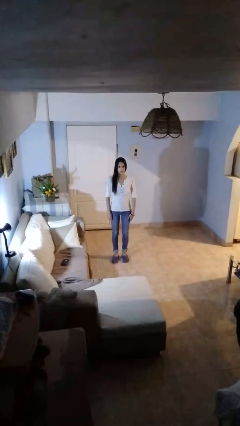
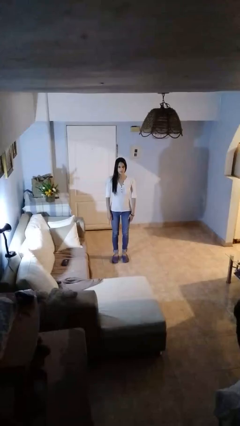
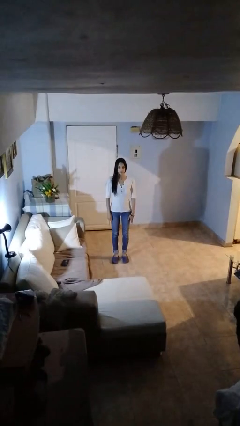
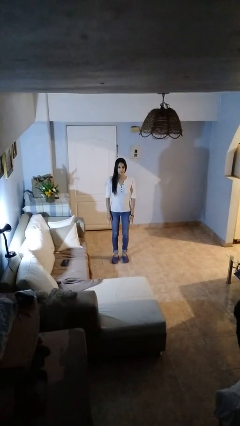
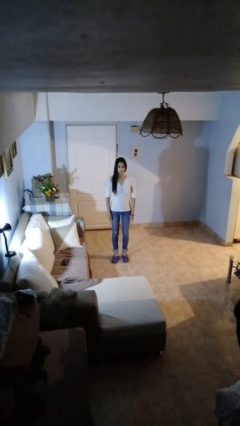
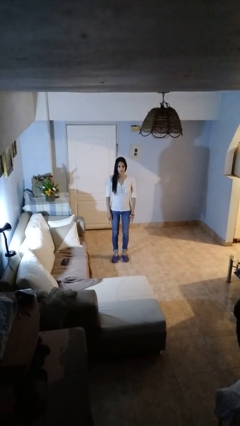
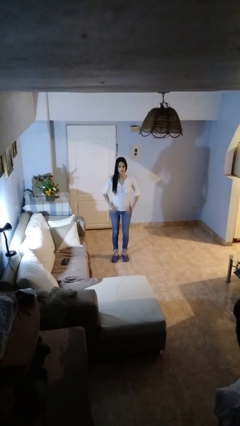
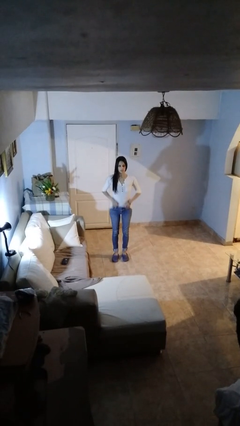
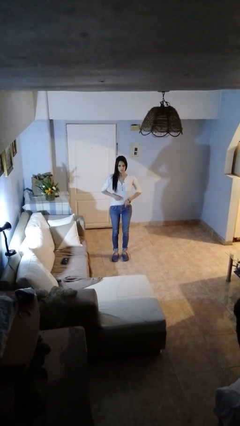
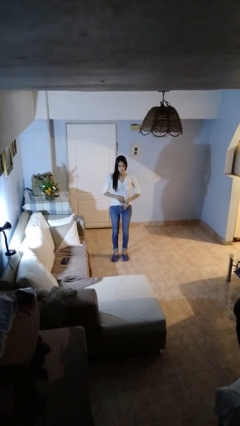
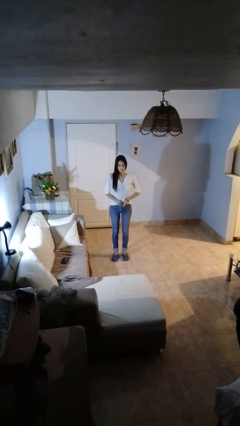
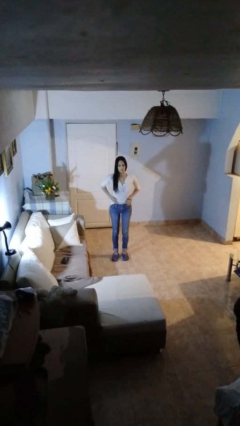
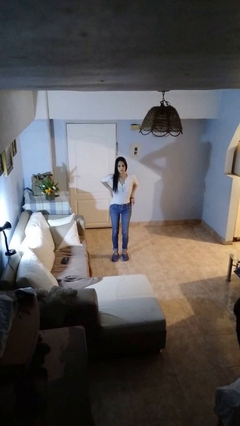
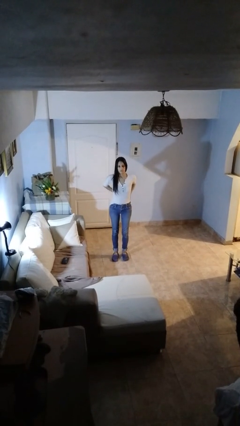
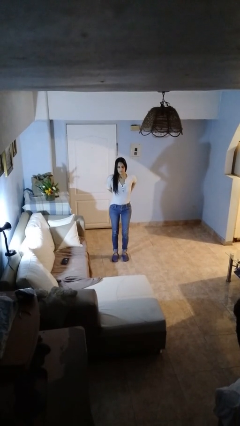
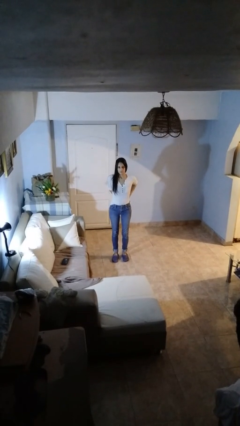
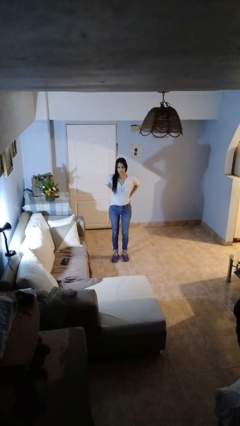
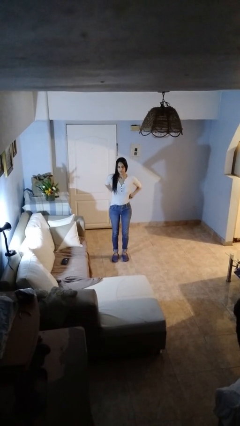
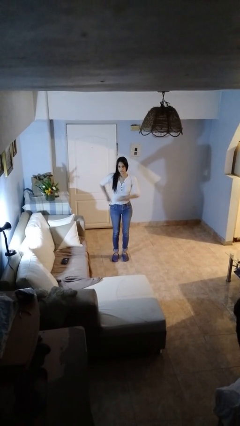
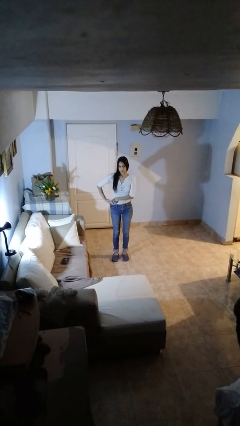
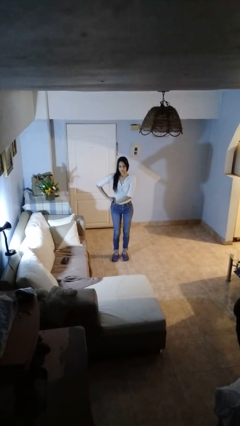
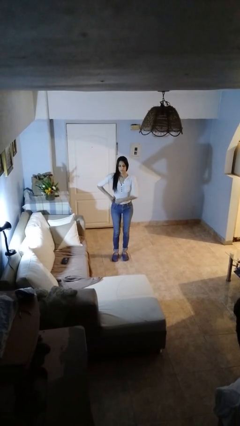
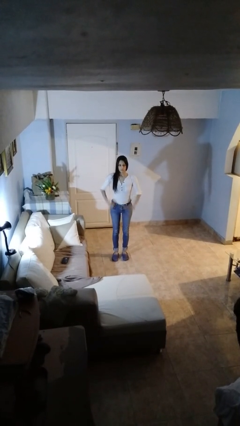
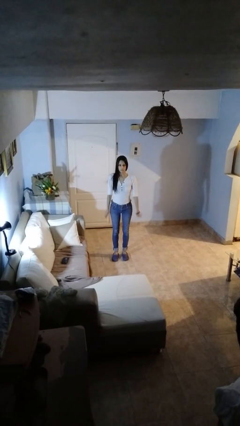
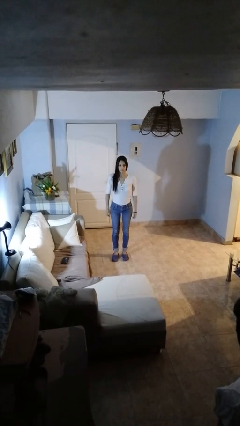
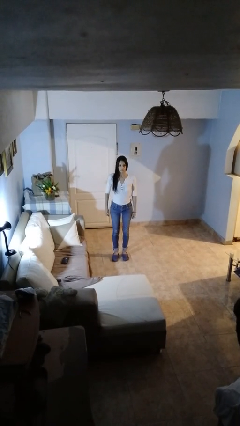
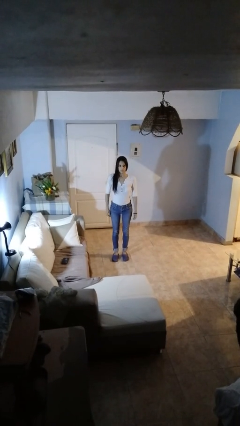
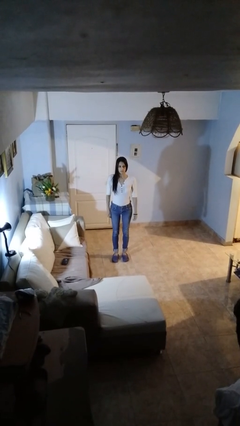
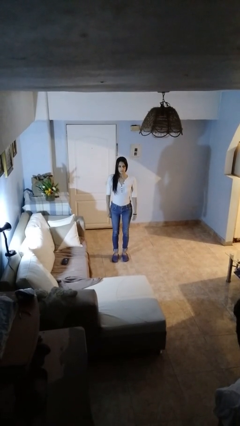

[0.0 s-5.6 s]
person tucks in shirt

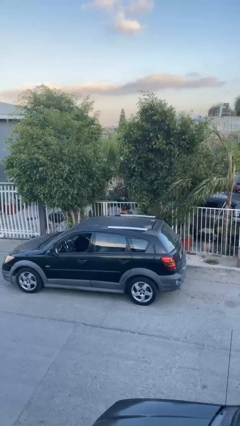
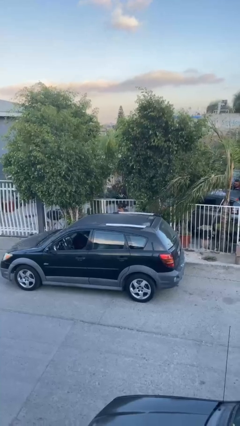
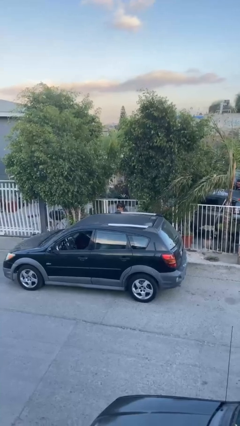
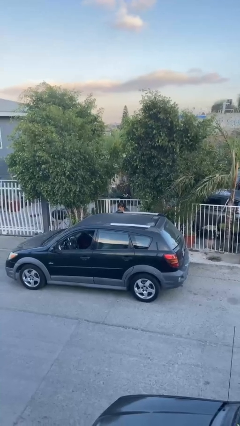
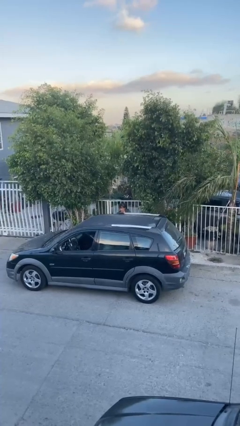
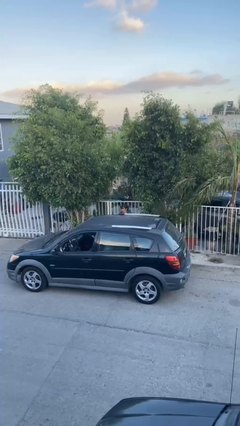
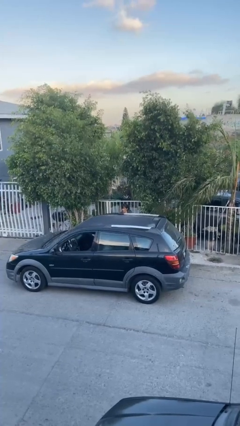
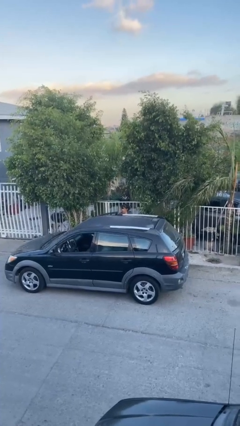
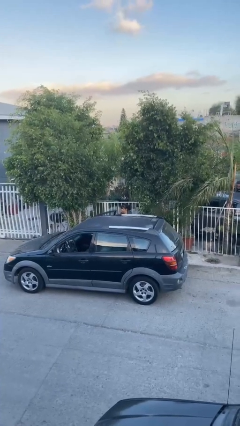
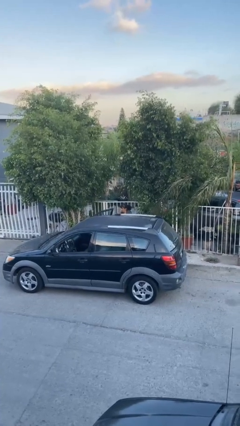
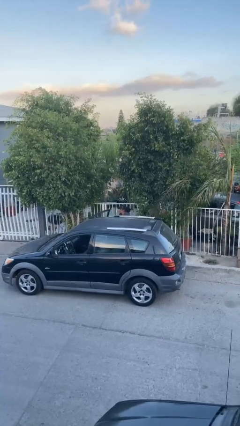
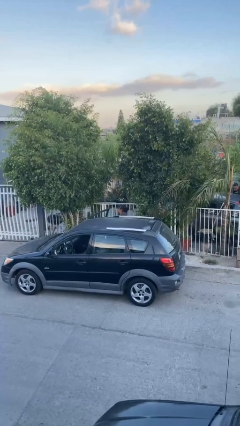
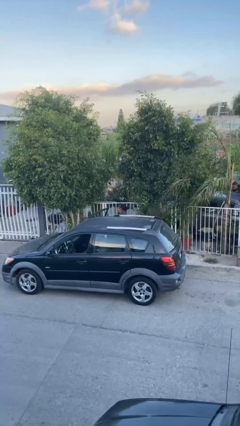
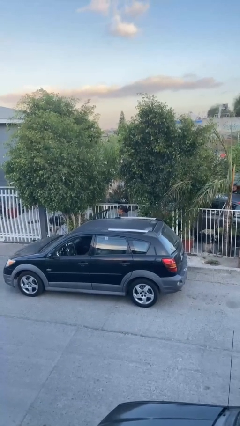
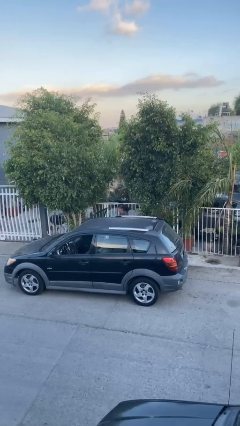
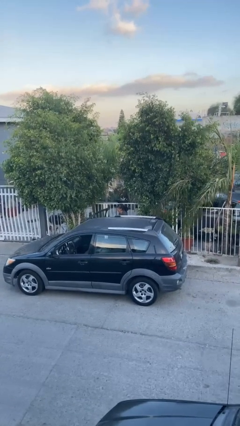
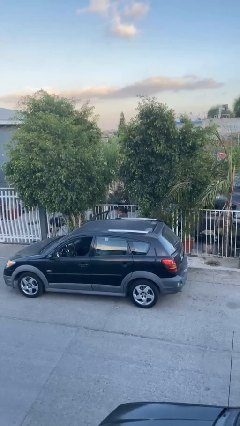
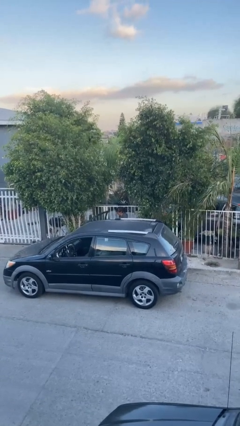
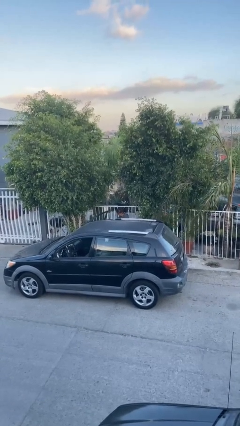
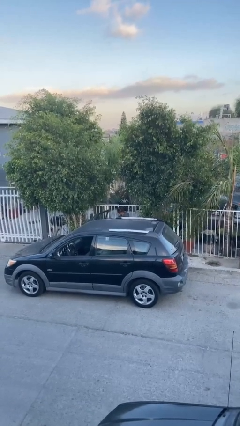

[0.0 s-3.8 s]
person opens car door

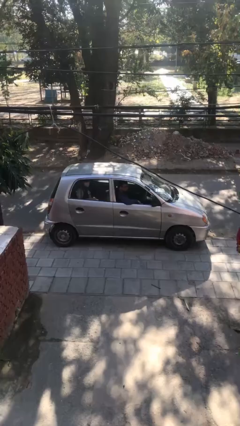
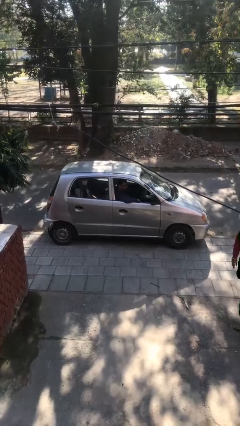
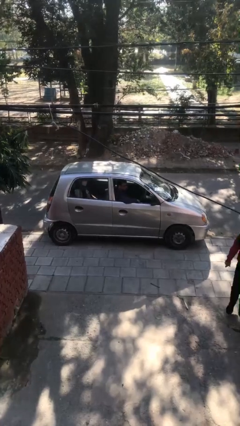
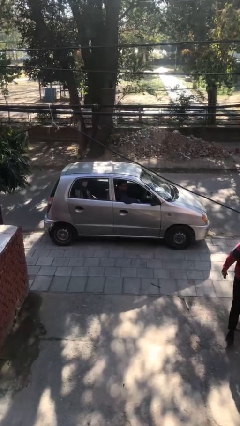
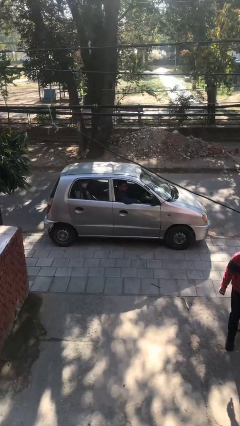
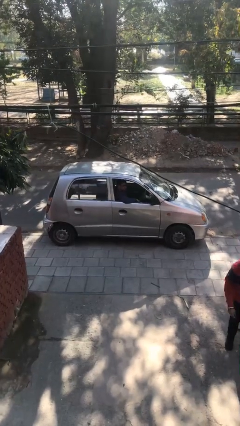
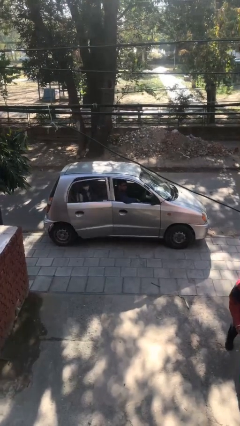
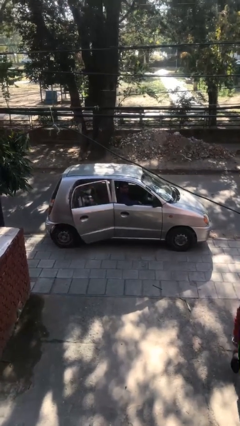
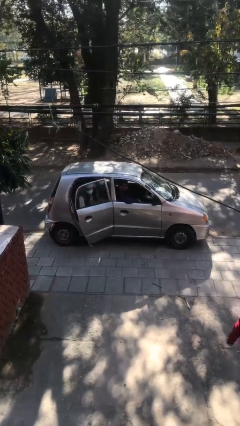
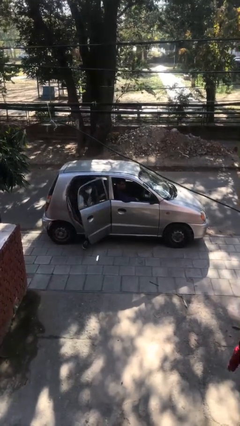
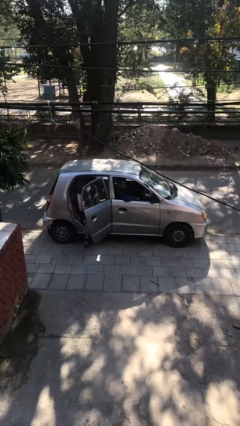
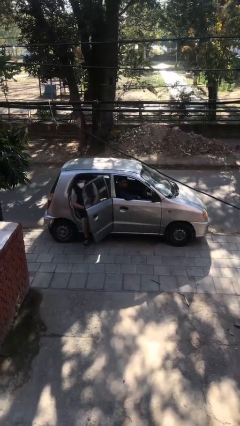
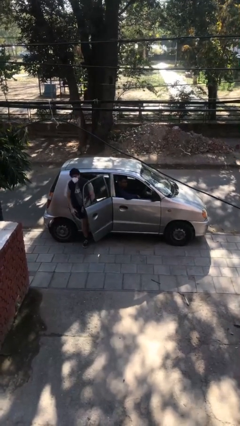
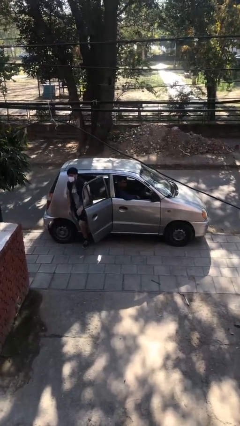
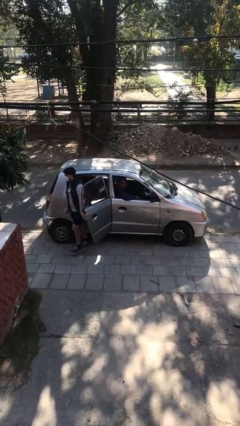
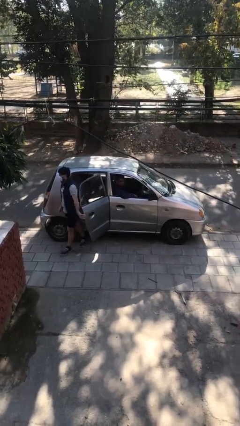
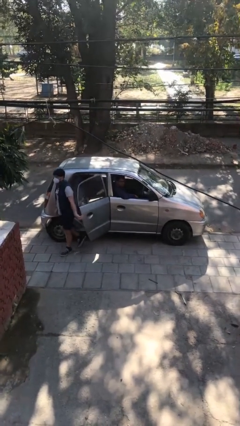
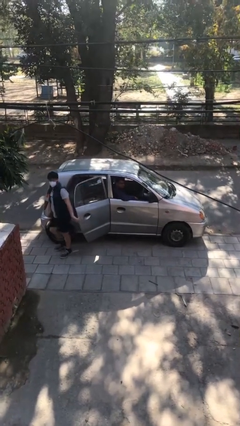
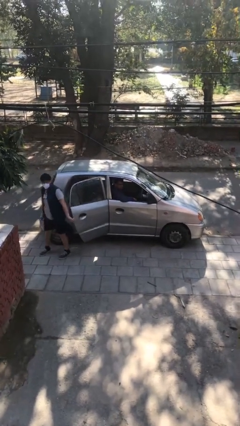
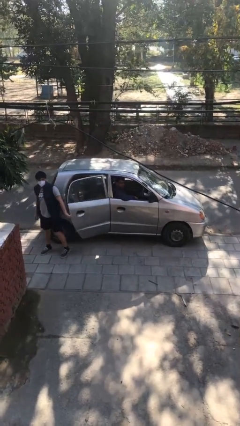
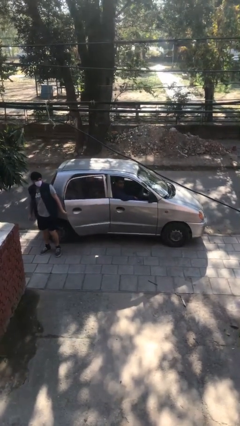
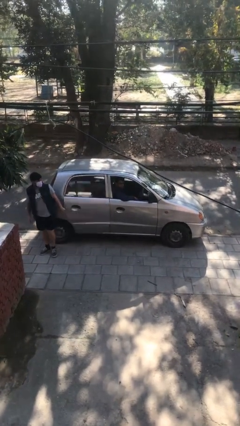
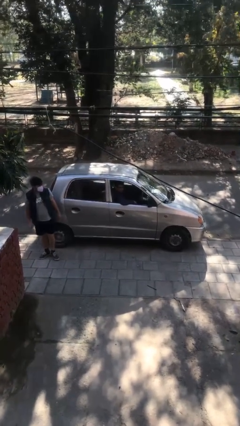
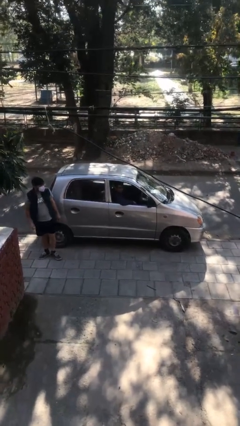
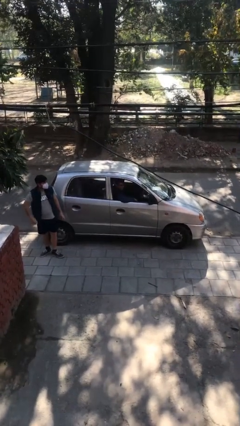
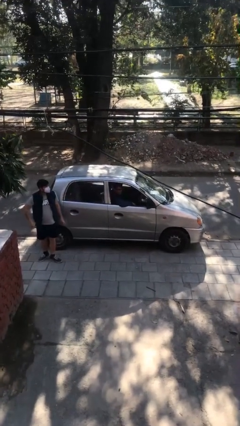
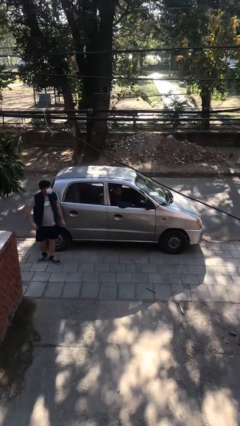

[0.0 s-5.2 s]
car drops off person

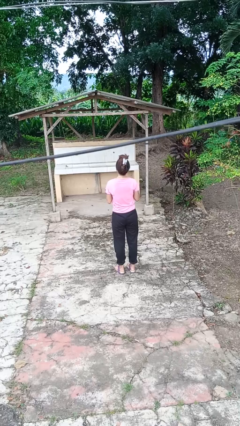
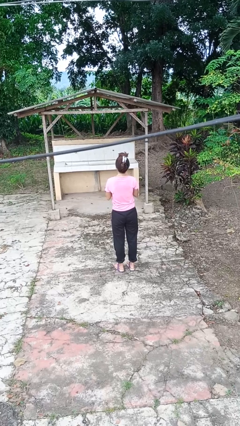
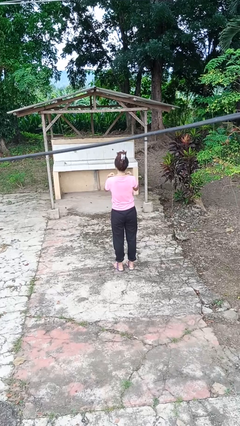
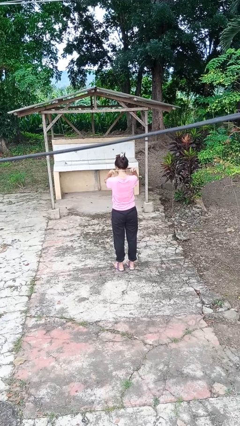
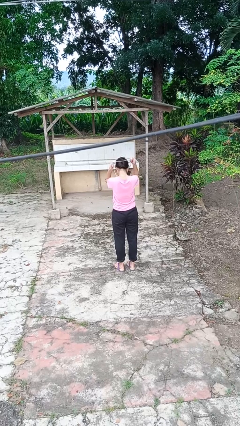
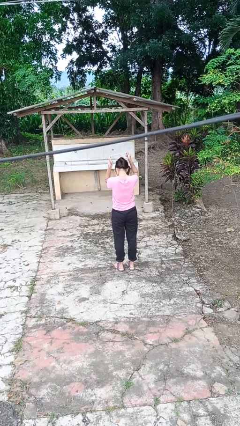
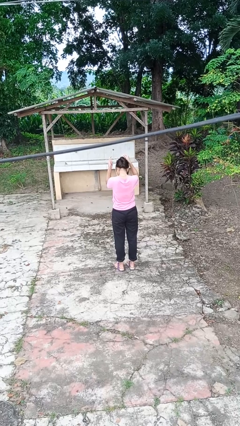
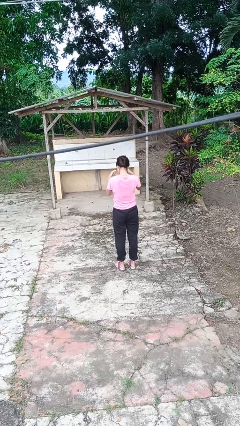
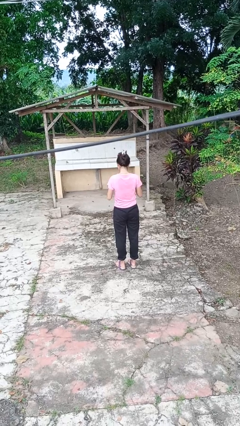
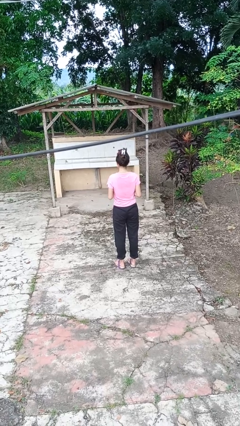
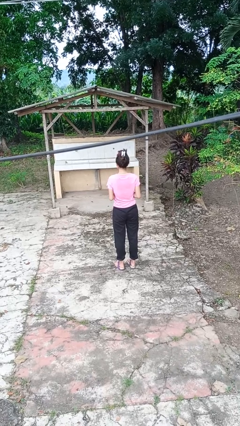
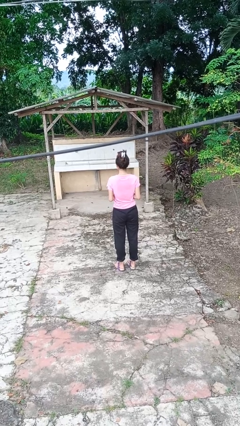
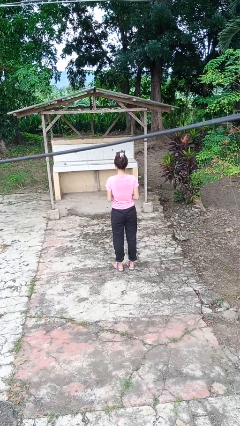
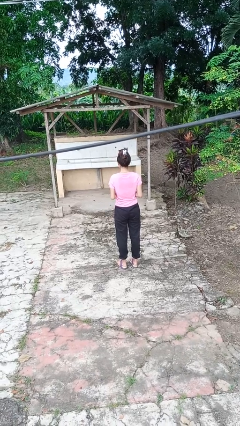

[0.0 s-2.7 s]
person takes off necklace

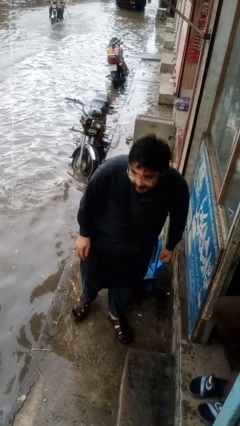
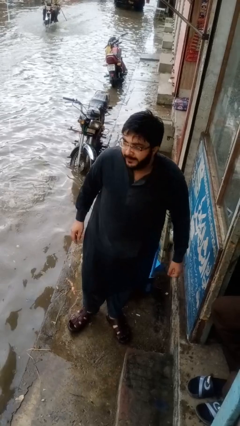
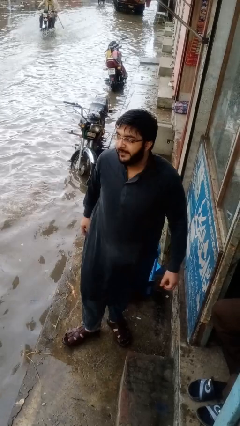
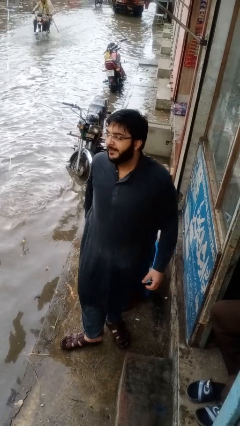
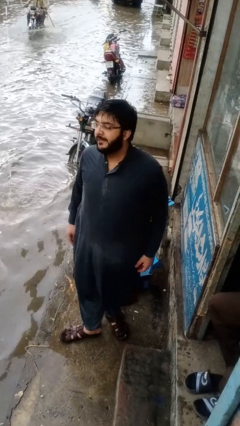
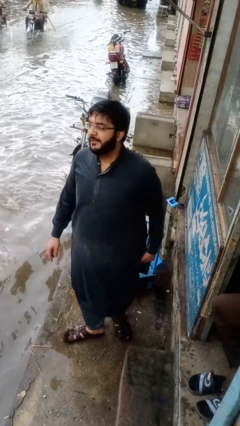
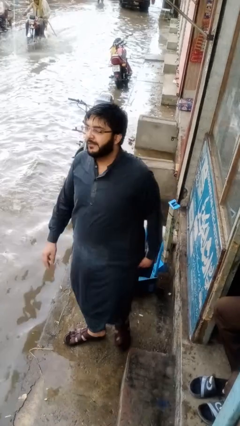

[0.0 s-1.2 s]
person stands up from floor
